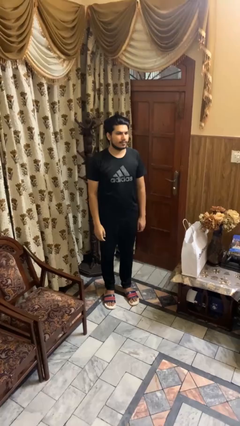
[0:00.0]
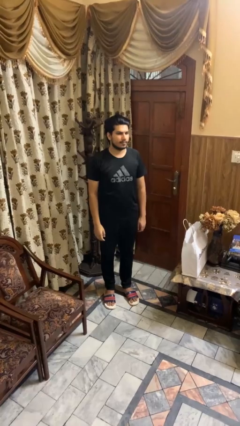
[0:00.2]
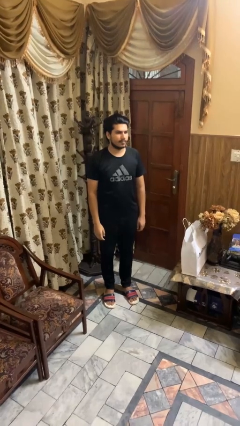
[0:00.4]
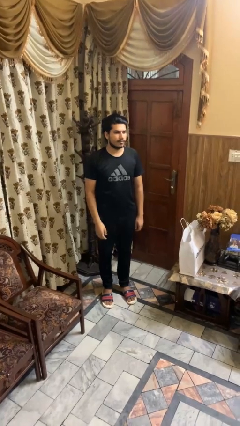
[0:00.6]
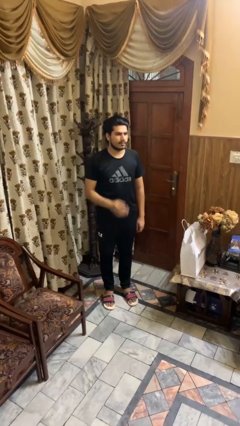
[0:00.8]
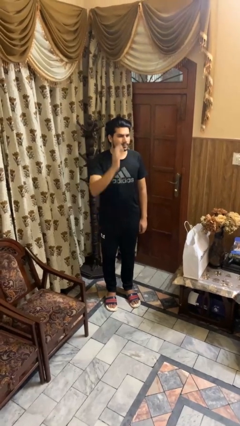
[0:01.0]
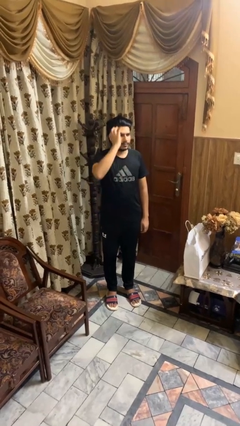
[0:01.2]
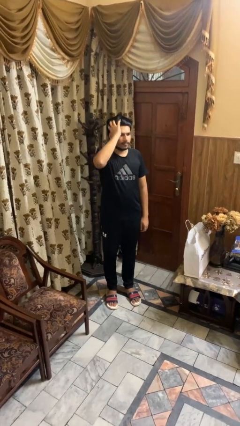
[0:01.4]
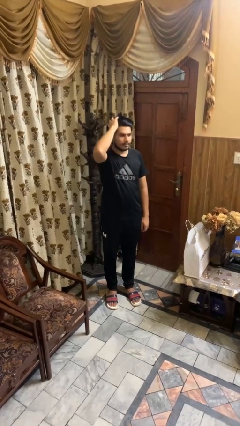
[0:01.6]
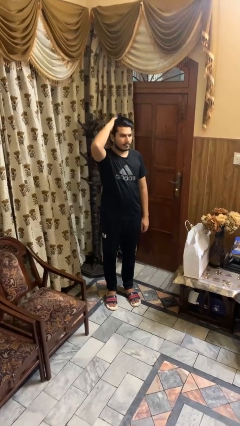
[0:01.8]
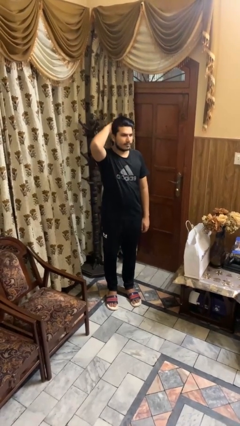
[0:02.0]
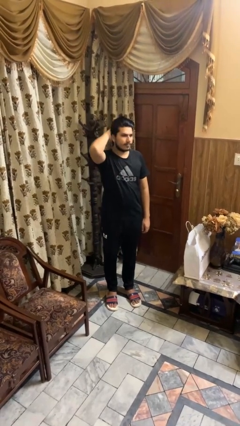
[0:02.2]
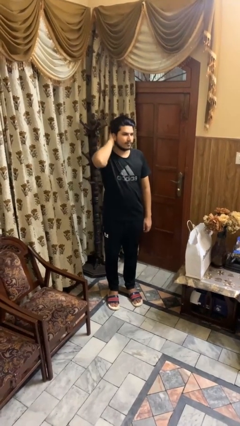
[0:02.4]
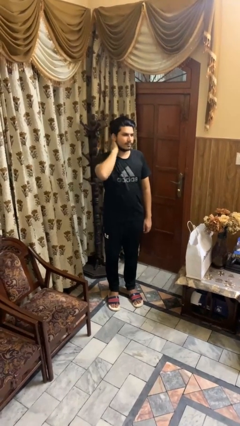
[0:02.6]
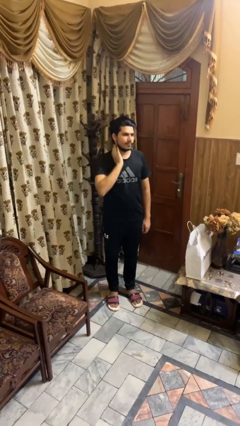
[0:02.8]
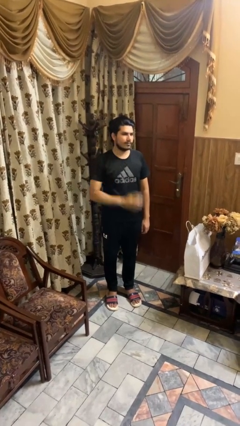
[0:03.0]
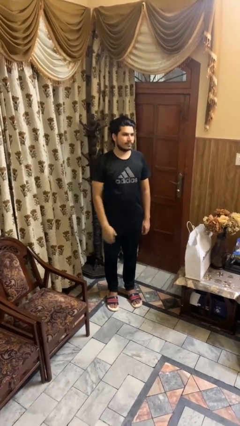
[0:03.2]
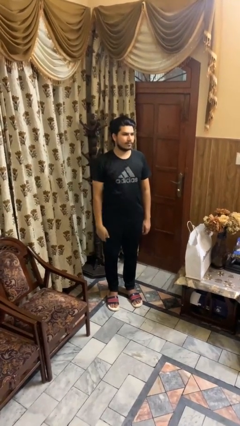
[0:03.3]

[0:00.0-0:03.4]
person strokes hair

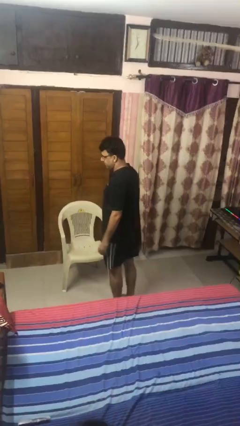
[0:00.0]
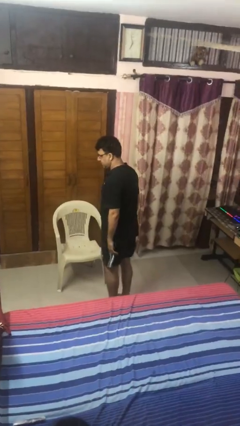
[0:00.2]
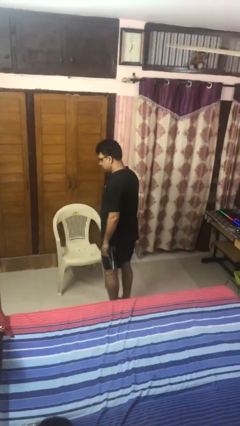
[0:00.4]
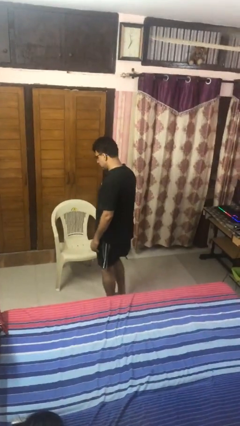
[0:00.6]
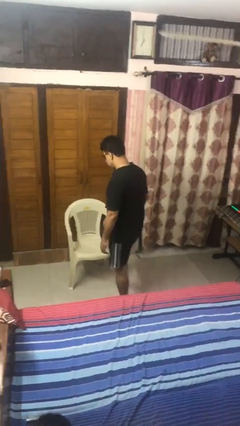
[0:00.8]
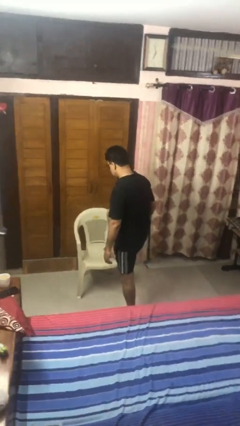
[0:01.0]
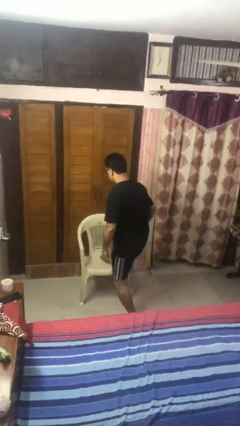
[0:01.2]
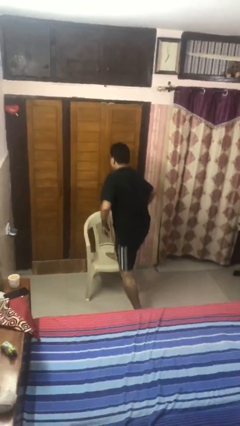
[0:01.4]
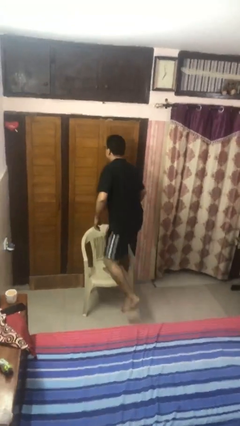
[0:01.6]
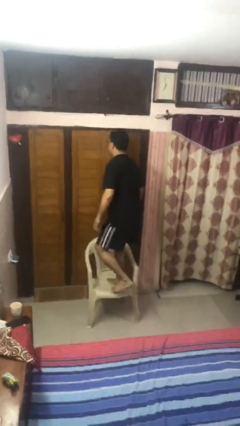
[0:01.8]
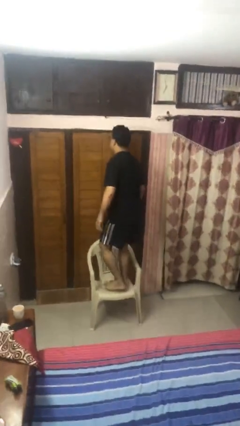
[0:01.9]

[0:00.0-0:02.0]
person climbs on chair

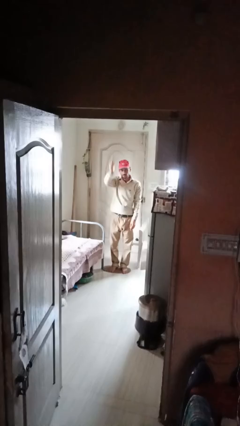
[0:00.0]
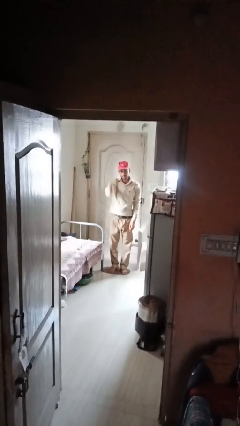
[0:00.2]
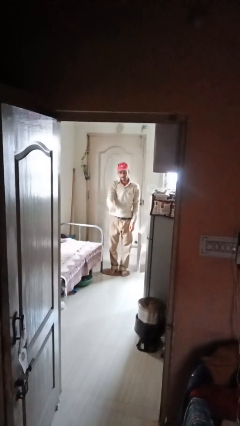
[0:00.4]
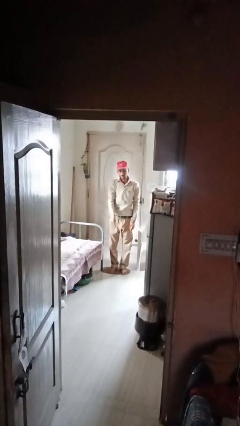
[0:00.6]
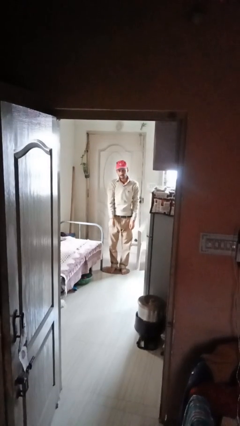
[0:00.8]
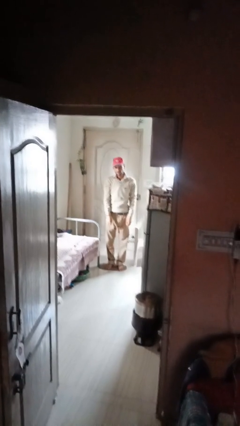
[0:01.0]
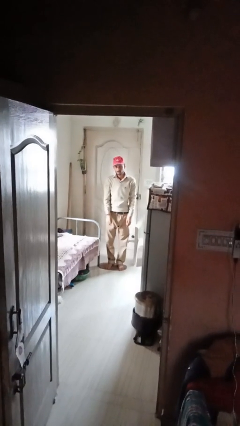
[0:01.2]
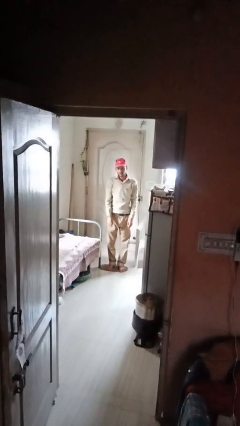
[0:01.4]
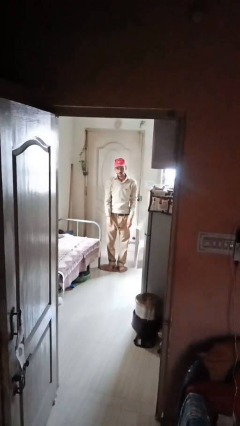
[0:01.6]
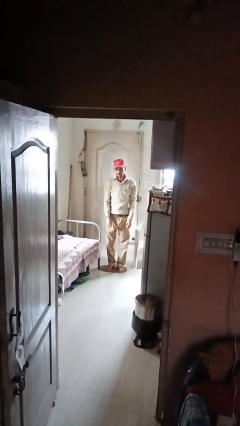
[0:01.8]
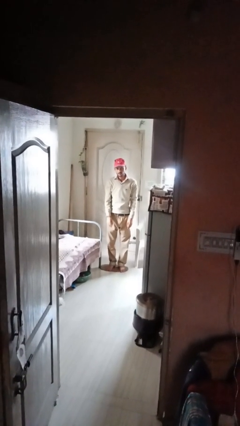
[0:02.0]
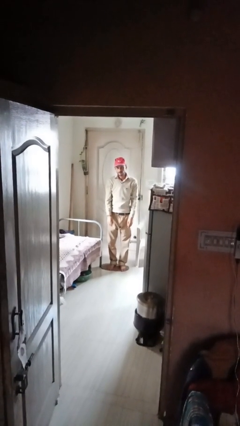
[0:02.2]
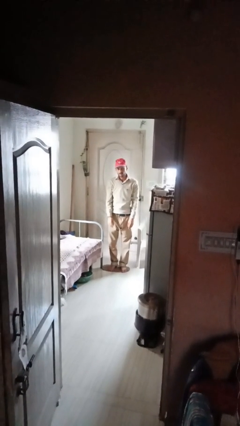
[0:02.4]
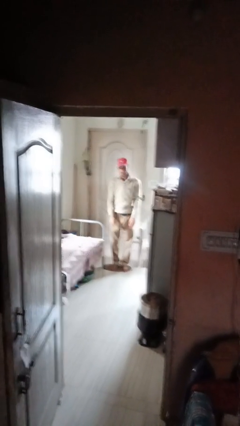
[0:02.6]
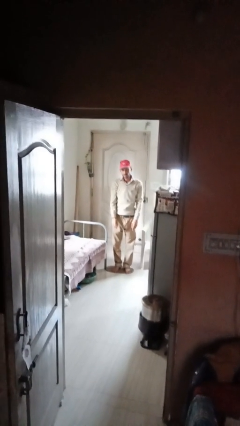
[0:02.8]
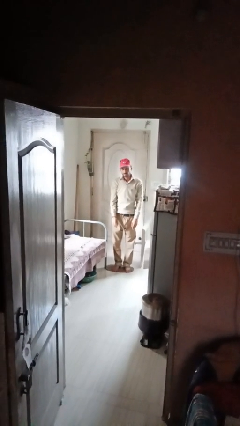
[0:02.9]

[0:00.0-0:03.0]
person gestures swipe down

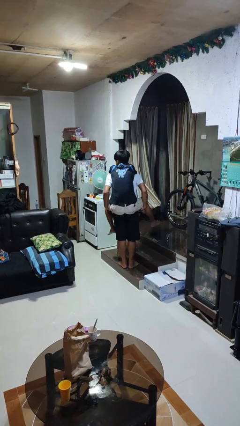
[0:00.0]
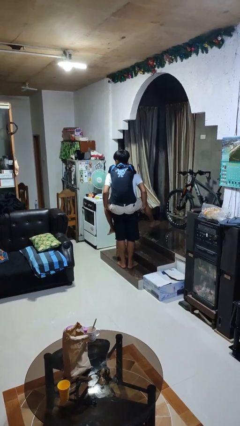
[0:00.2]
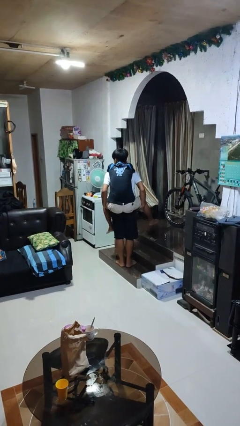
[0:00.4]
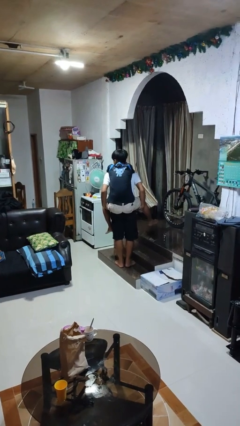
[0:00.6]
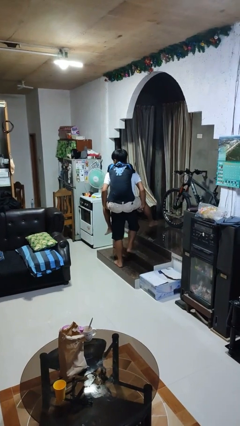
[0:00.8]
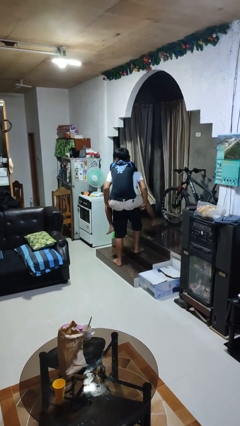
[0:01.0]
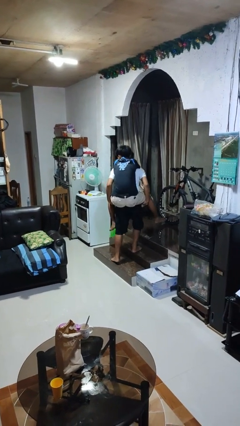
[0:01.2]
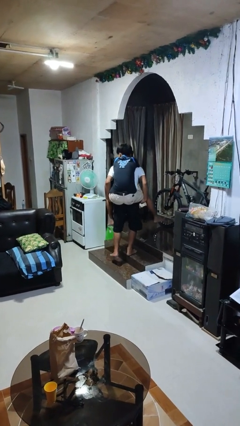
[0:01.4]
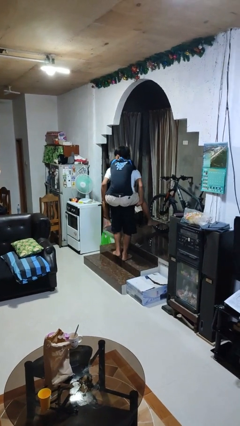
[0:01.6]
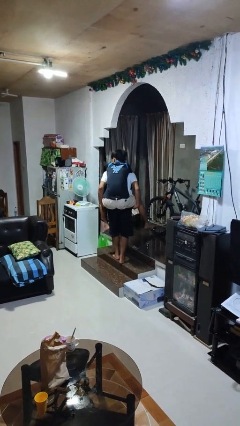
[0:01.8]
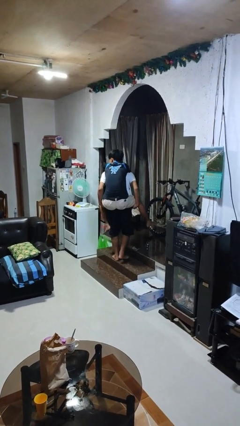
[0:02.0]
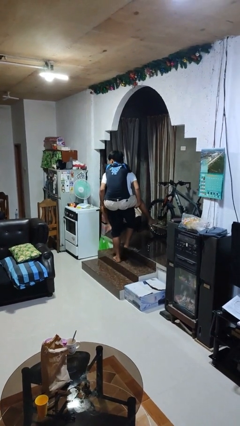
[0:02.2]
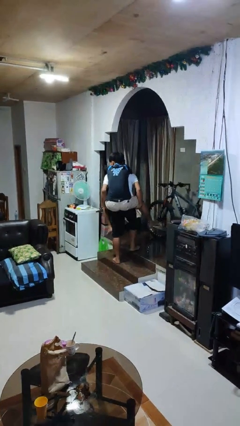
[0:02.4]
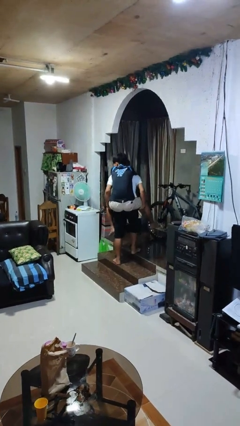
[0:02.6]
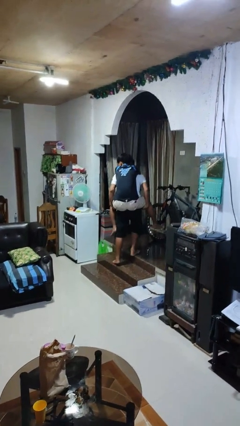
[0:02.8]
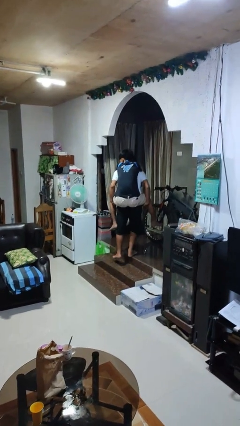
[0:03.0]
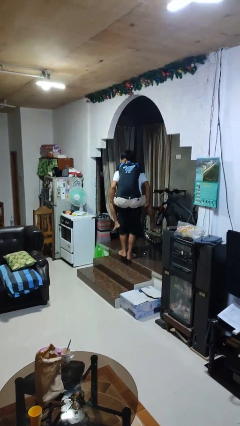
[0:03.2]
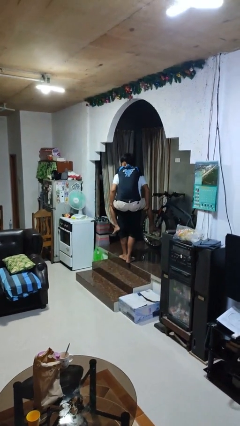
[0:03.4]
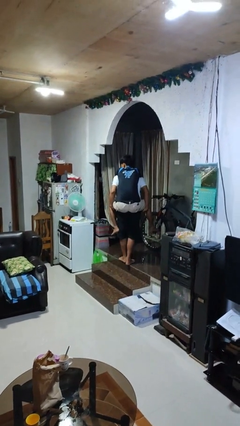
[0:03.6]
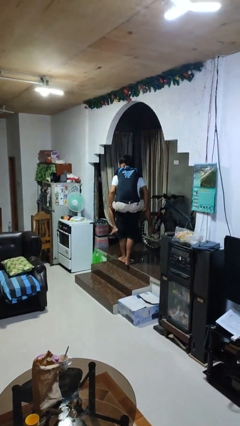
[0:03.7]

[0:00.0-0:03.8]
person carries person on back

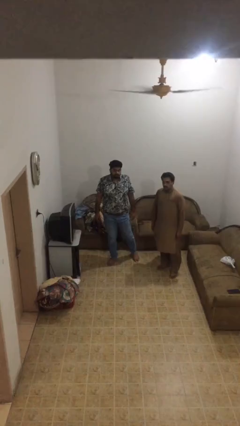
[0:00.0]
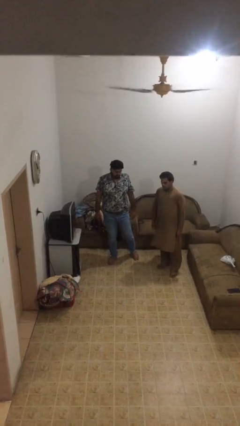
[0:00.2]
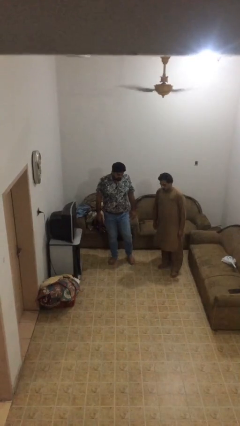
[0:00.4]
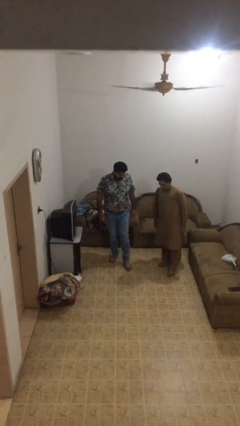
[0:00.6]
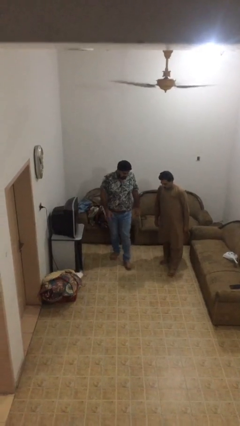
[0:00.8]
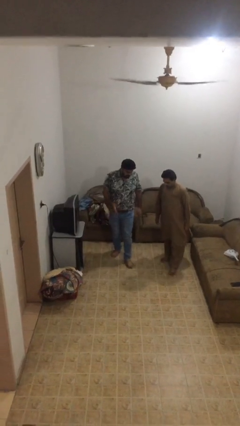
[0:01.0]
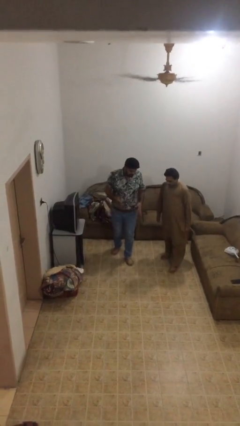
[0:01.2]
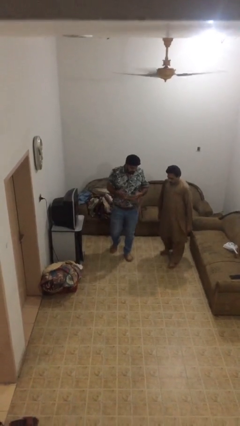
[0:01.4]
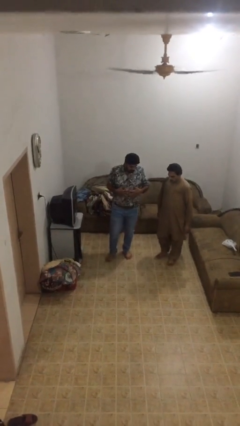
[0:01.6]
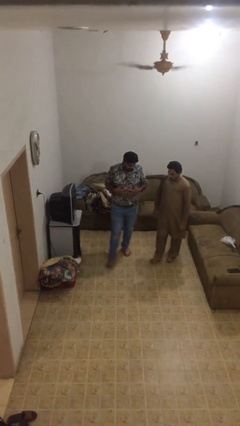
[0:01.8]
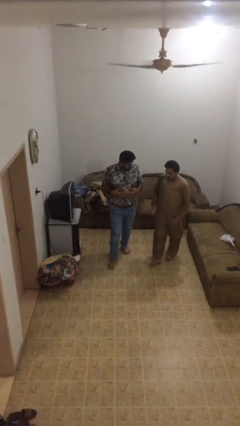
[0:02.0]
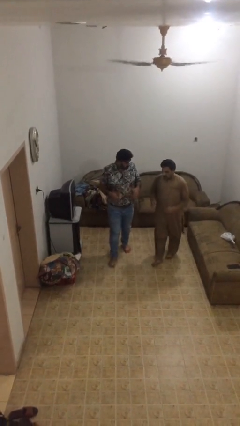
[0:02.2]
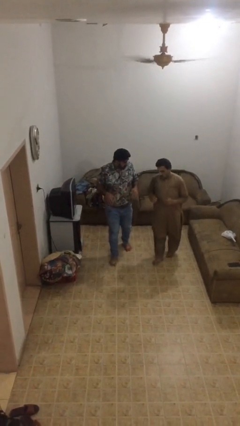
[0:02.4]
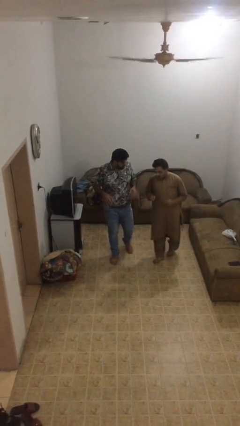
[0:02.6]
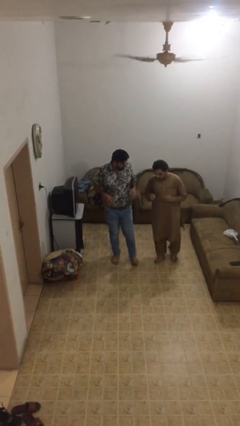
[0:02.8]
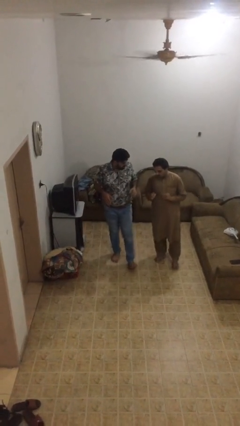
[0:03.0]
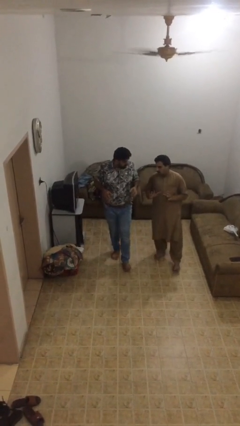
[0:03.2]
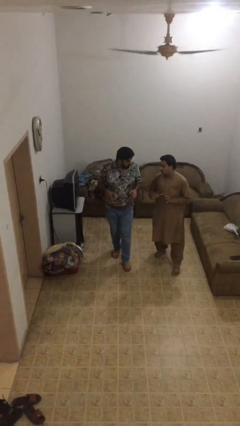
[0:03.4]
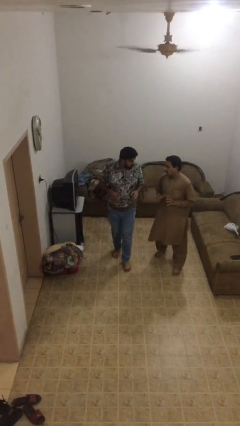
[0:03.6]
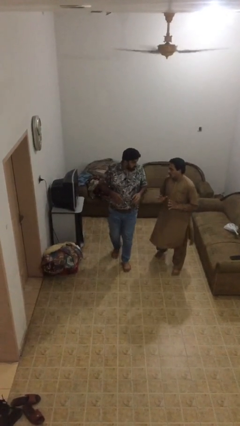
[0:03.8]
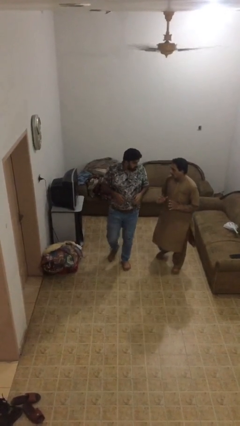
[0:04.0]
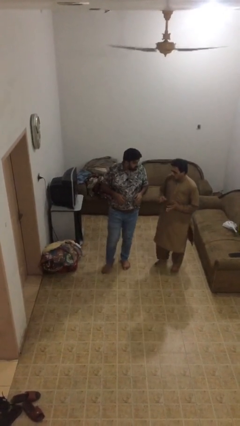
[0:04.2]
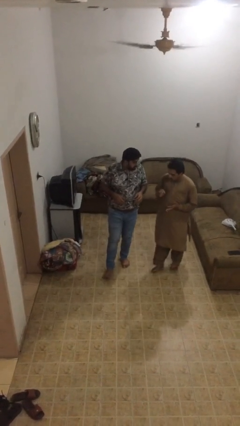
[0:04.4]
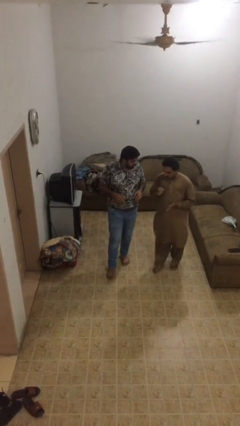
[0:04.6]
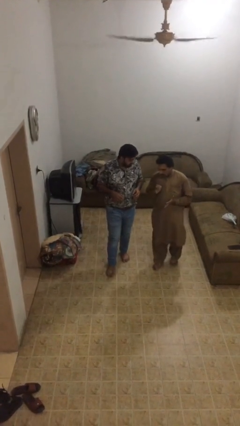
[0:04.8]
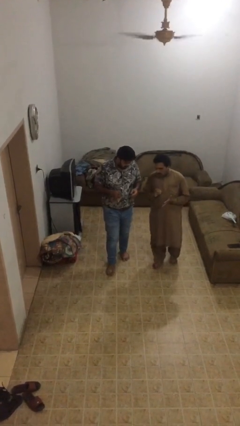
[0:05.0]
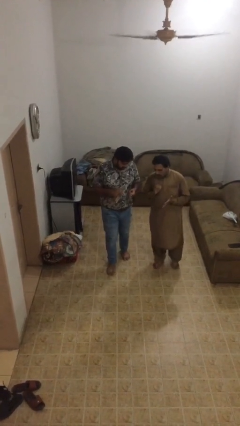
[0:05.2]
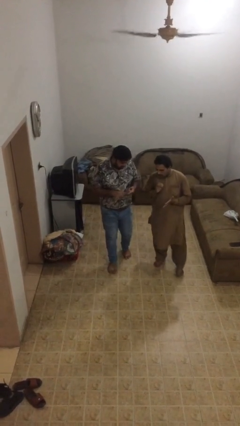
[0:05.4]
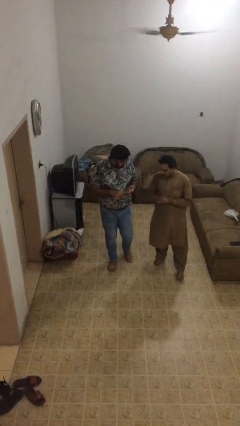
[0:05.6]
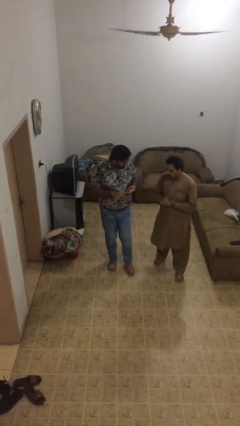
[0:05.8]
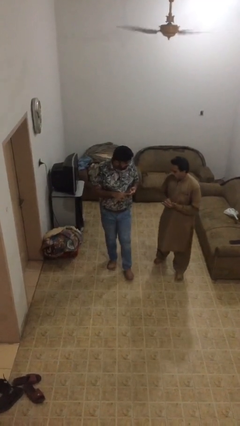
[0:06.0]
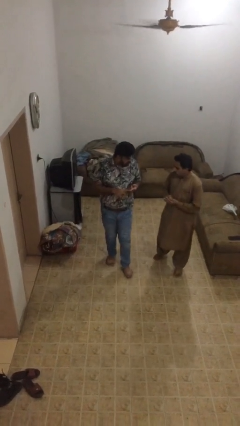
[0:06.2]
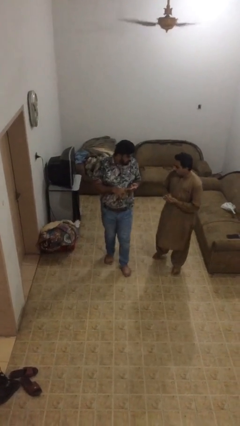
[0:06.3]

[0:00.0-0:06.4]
person talks to person
